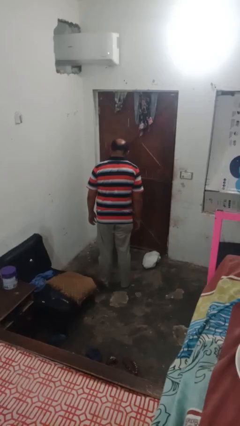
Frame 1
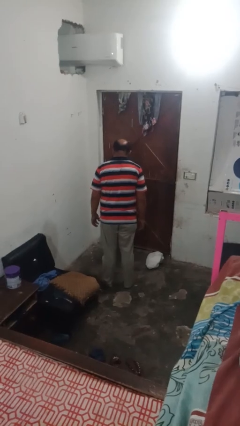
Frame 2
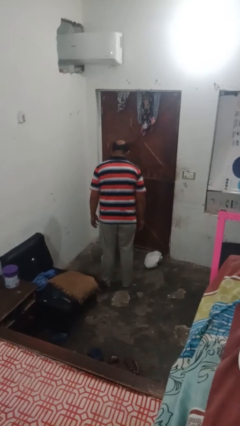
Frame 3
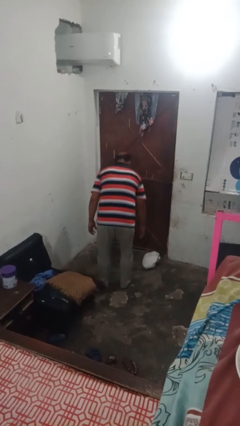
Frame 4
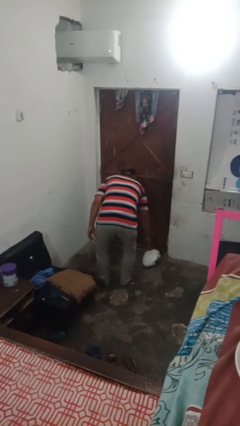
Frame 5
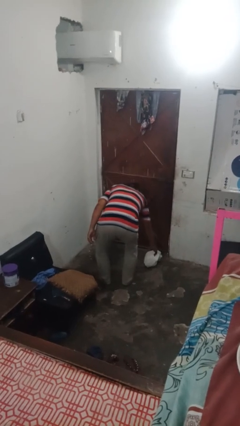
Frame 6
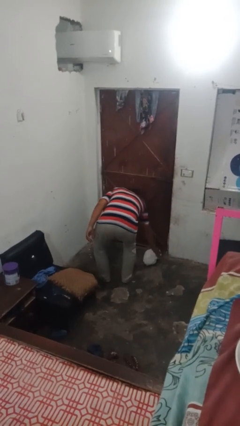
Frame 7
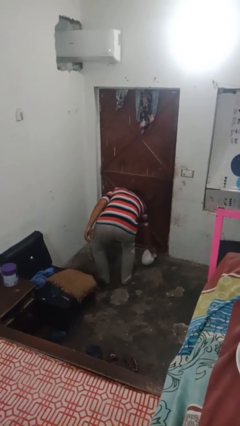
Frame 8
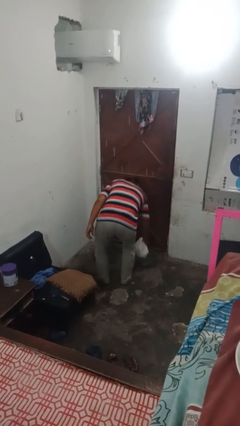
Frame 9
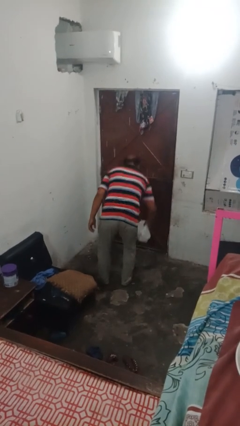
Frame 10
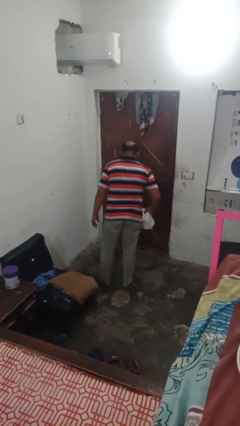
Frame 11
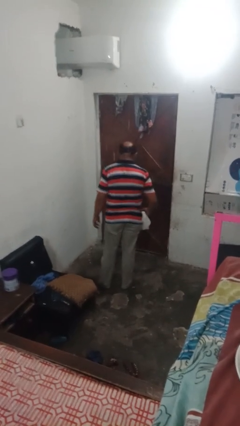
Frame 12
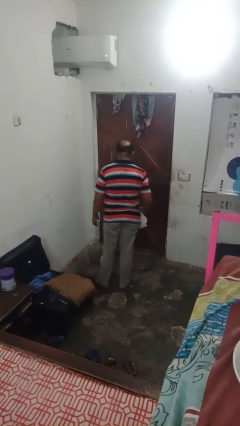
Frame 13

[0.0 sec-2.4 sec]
person picks up object from floor

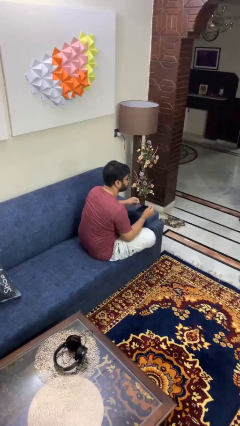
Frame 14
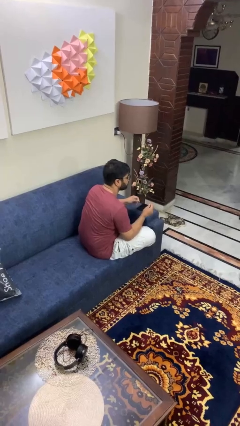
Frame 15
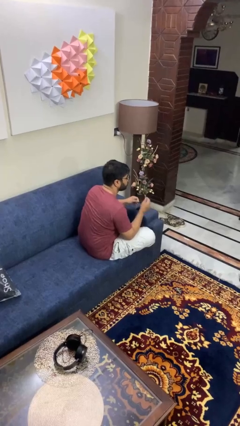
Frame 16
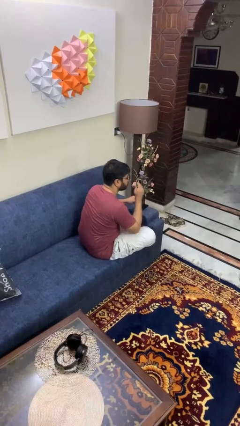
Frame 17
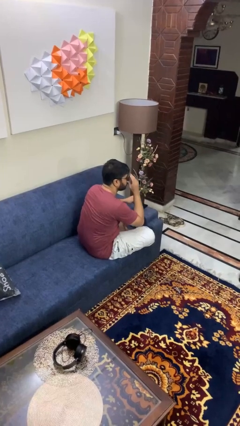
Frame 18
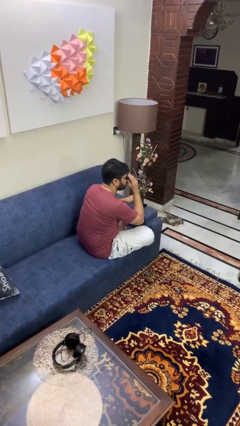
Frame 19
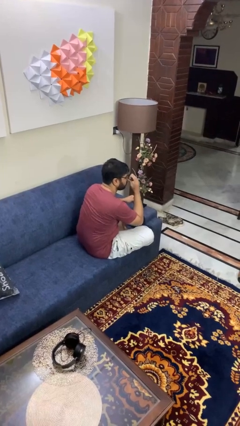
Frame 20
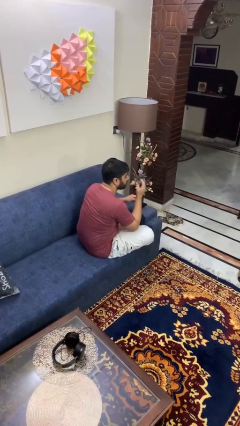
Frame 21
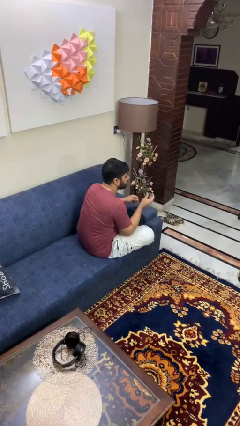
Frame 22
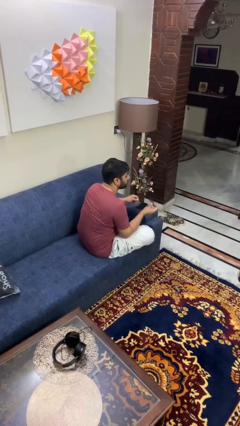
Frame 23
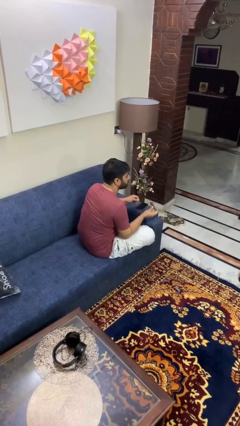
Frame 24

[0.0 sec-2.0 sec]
person takes off glasses

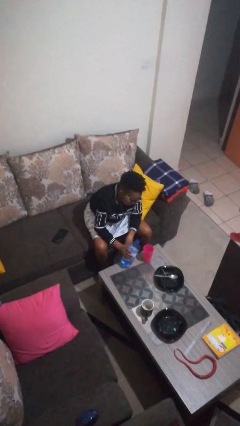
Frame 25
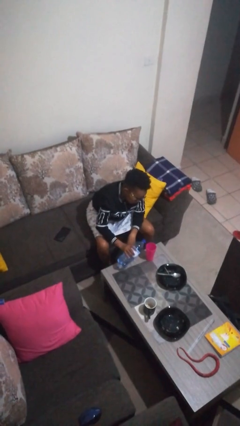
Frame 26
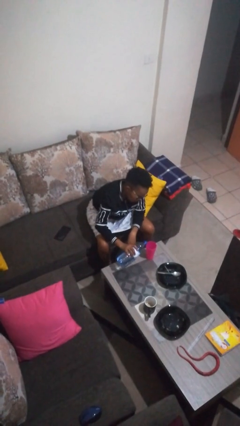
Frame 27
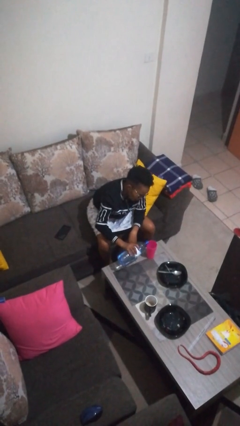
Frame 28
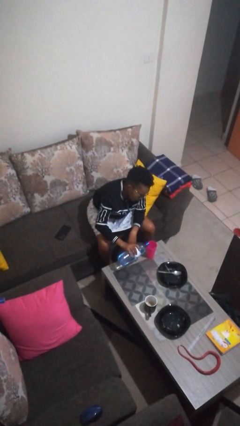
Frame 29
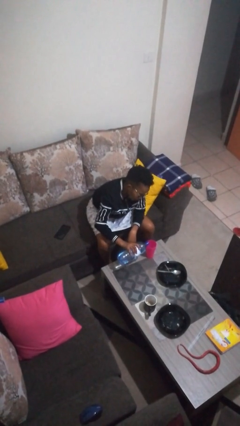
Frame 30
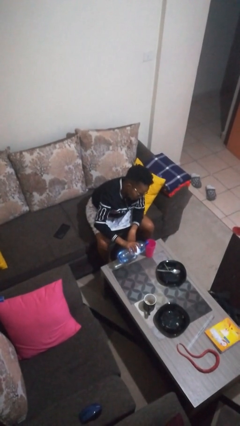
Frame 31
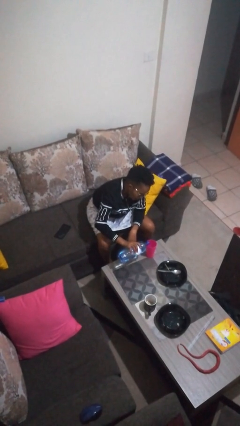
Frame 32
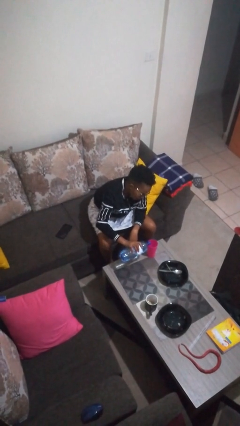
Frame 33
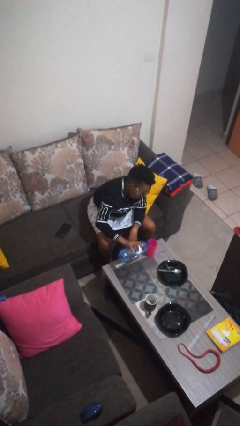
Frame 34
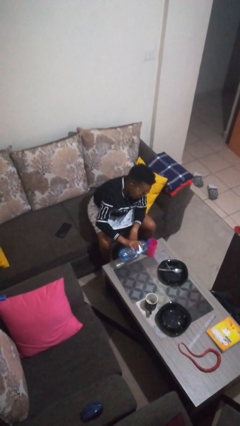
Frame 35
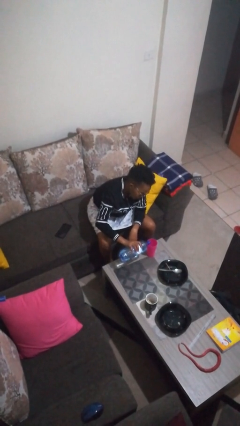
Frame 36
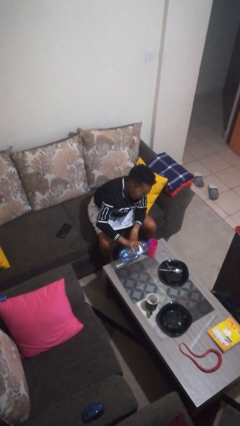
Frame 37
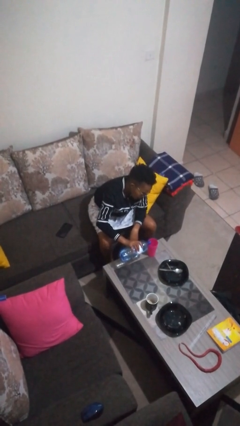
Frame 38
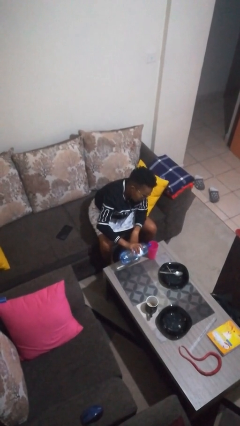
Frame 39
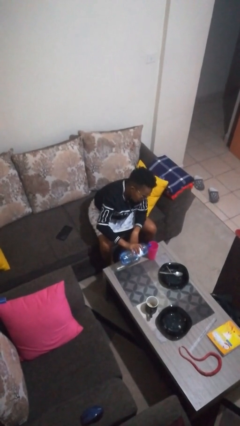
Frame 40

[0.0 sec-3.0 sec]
person pours liquid into cup

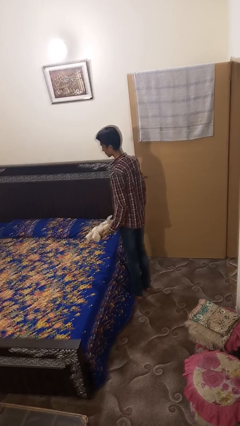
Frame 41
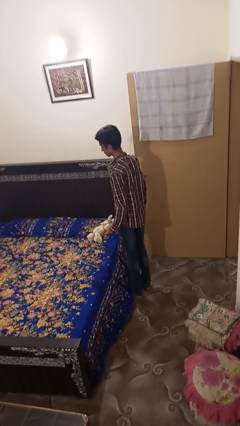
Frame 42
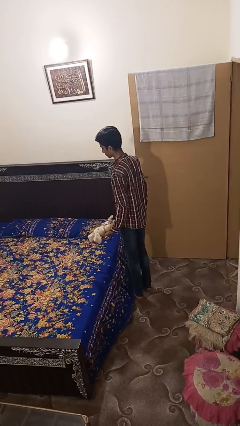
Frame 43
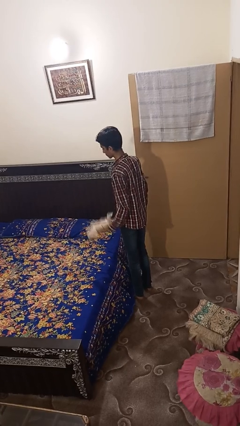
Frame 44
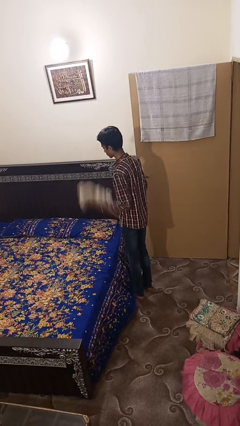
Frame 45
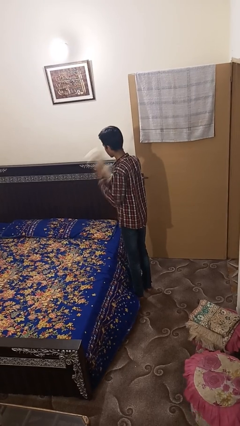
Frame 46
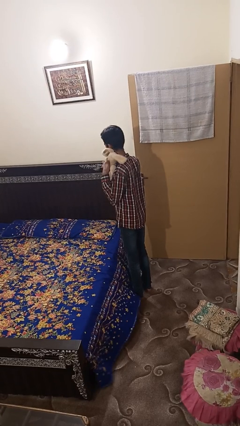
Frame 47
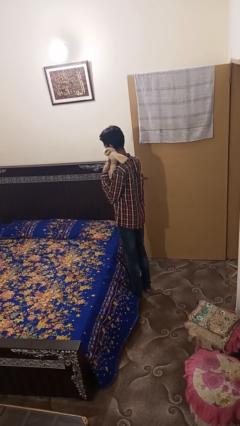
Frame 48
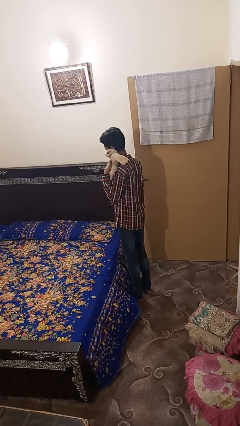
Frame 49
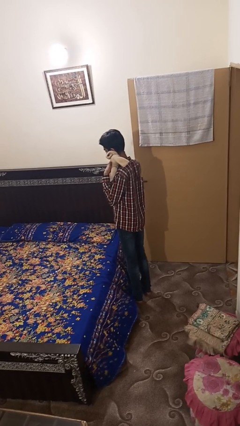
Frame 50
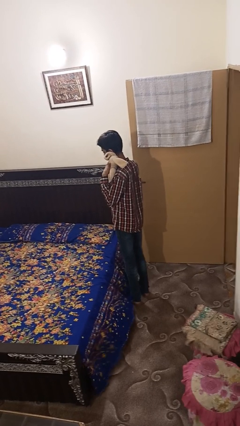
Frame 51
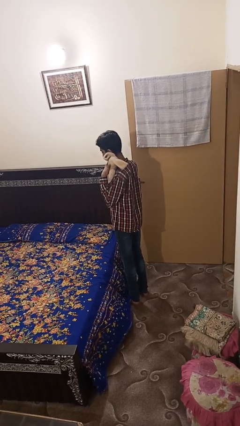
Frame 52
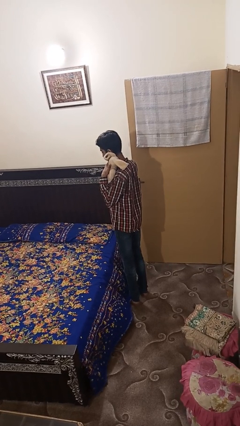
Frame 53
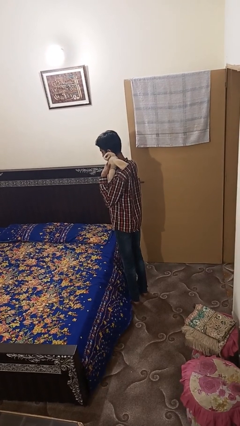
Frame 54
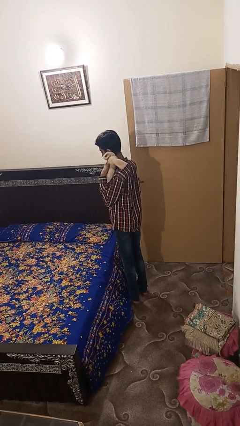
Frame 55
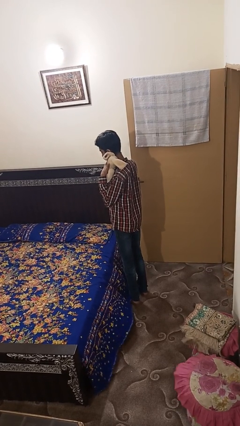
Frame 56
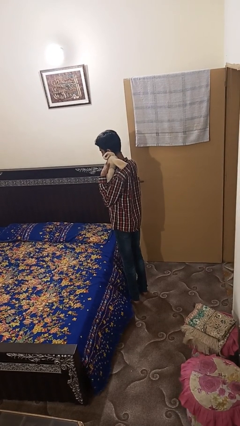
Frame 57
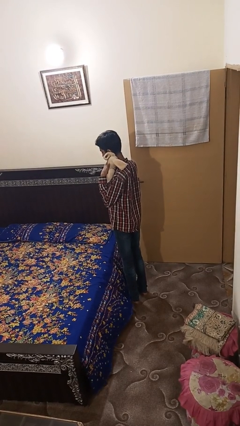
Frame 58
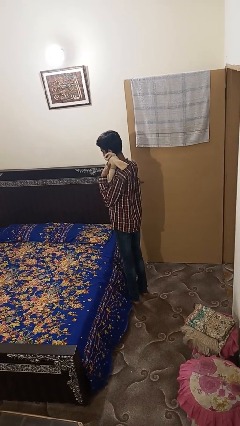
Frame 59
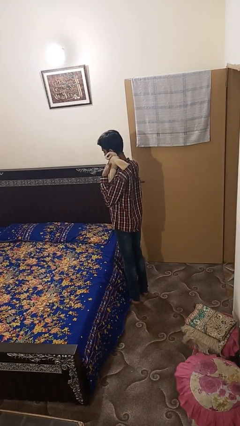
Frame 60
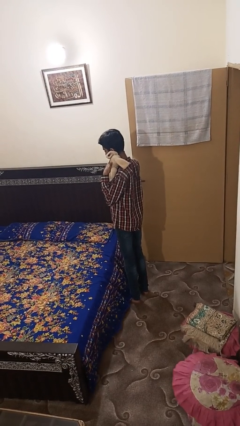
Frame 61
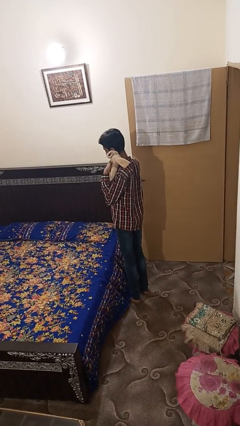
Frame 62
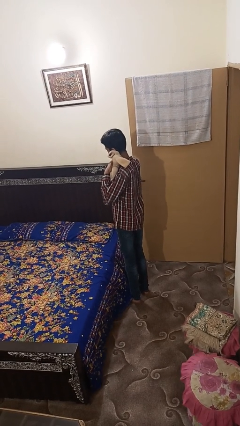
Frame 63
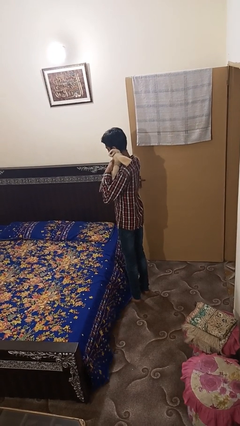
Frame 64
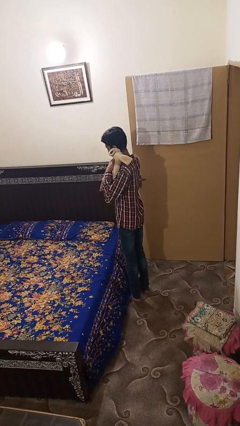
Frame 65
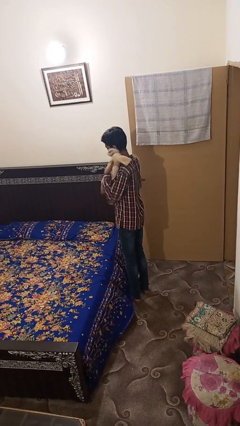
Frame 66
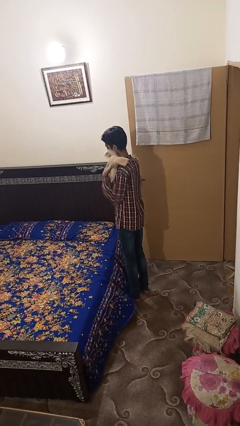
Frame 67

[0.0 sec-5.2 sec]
person hugs stuffed animal

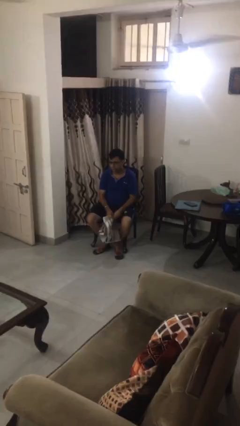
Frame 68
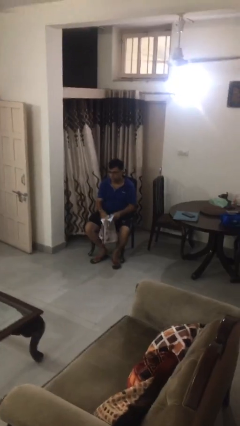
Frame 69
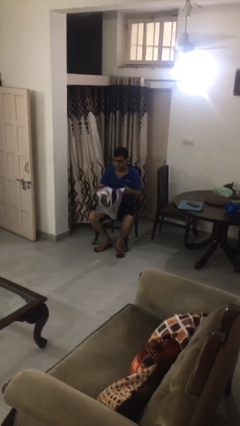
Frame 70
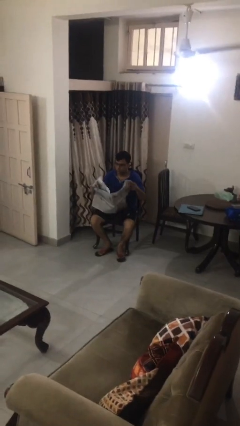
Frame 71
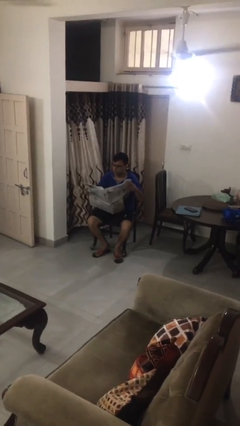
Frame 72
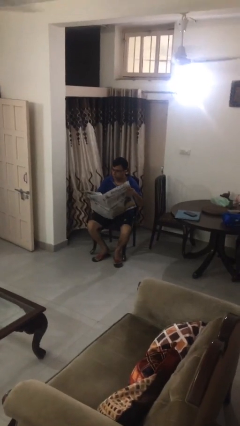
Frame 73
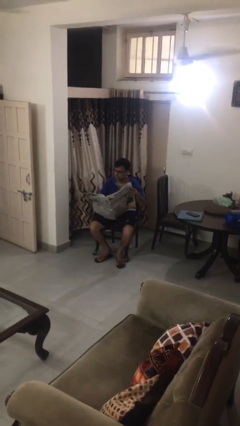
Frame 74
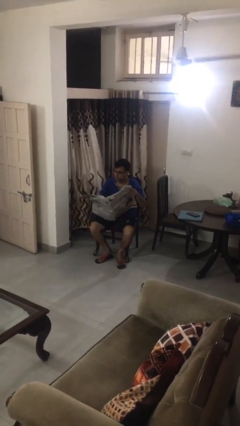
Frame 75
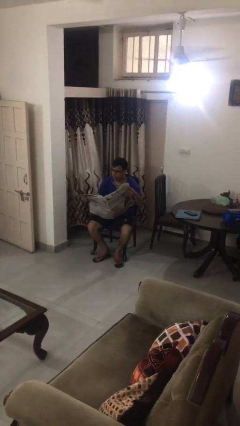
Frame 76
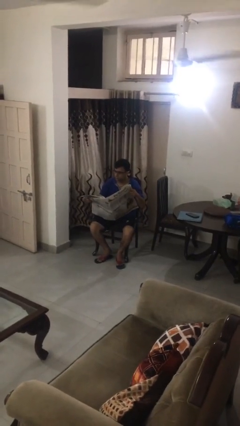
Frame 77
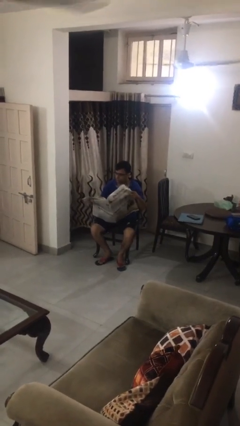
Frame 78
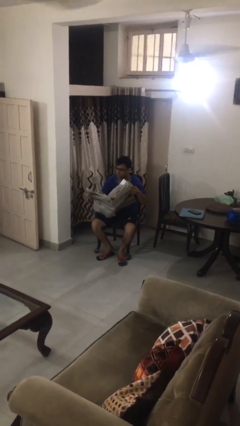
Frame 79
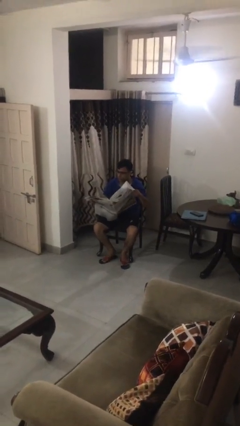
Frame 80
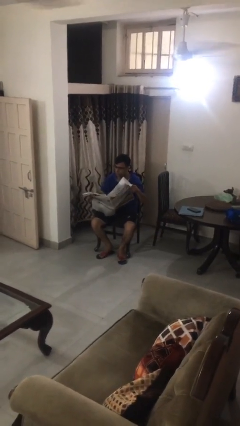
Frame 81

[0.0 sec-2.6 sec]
person reads newspaper

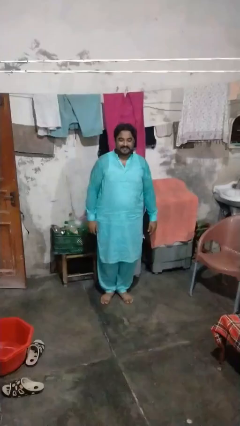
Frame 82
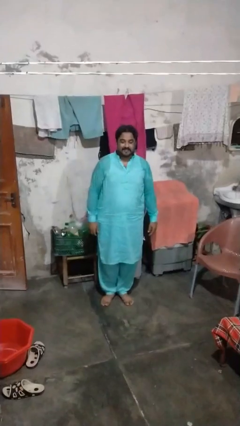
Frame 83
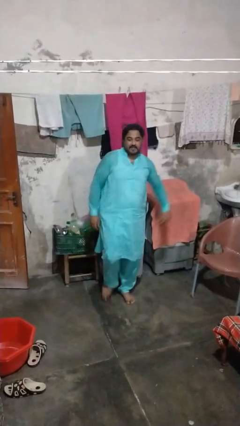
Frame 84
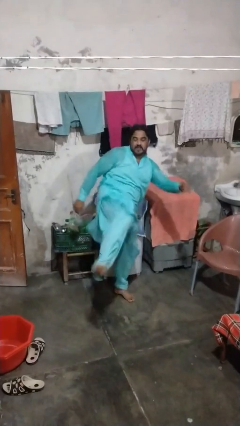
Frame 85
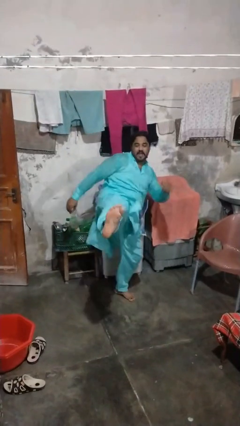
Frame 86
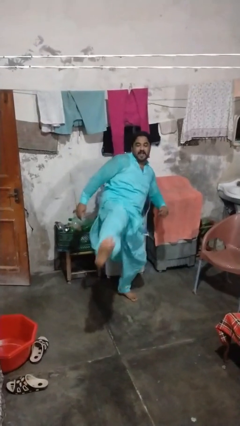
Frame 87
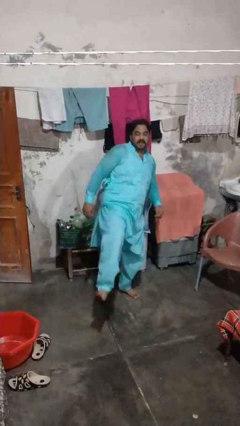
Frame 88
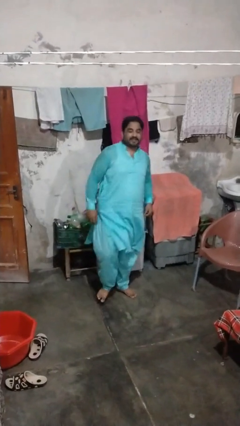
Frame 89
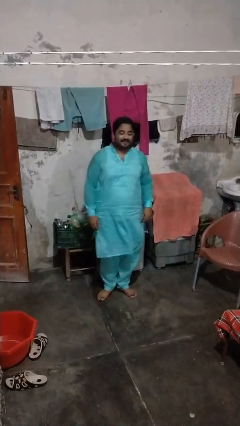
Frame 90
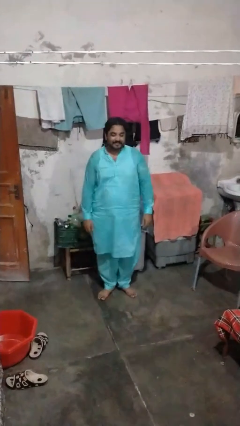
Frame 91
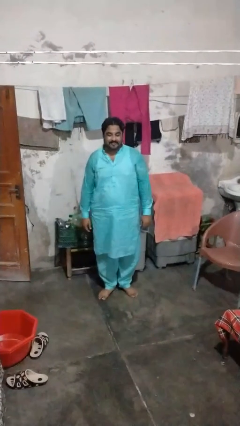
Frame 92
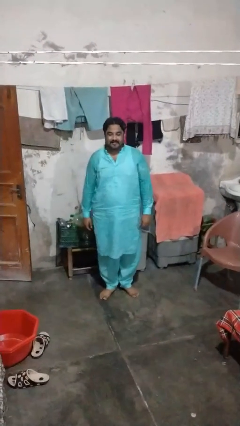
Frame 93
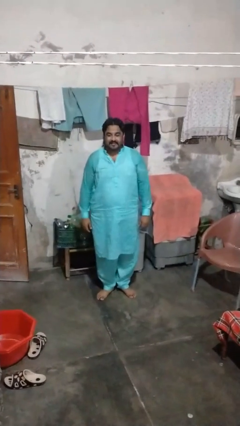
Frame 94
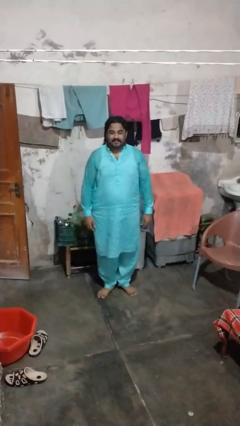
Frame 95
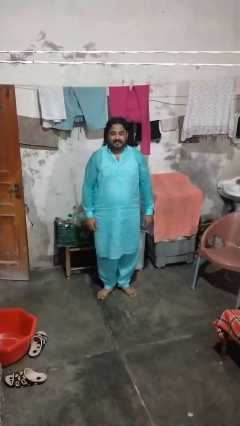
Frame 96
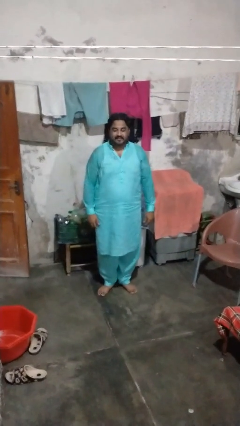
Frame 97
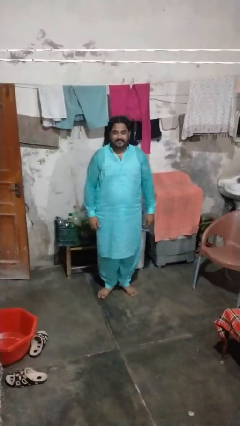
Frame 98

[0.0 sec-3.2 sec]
person karate kicks
